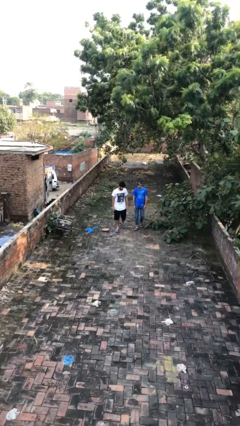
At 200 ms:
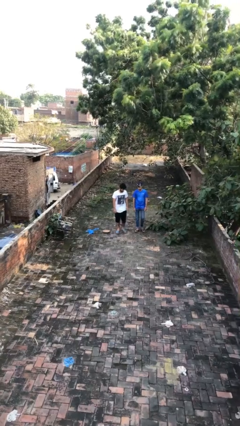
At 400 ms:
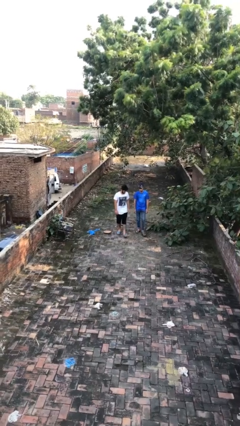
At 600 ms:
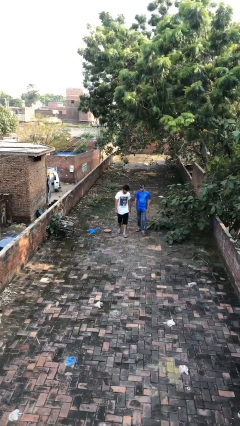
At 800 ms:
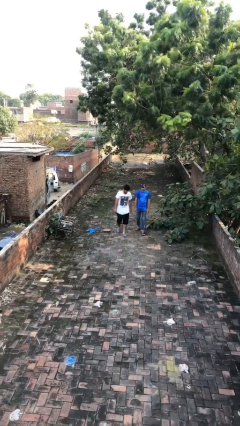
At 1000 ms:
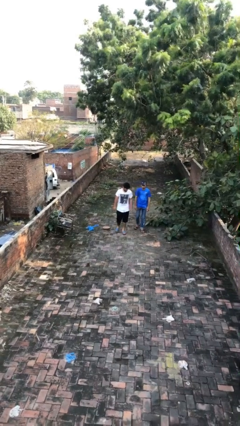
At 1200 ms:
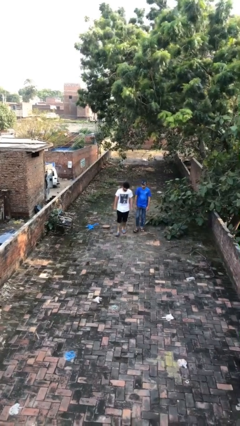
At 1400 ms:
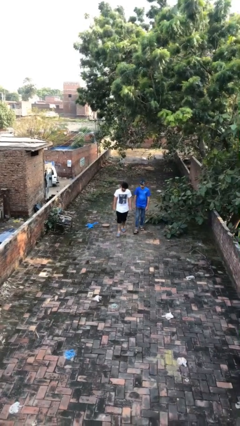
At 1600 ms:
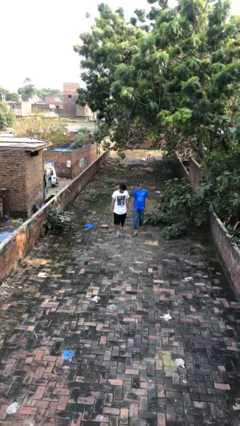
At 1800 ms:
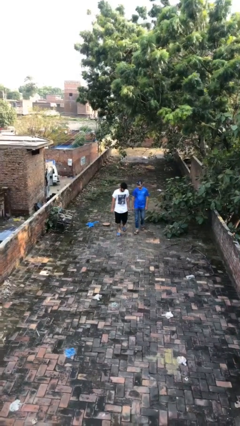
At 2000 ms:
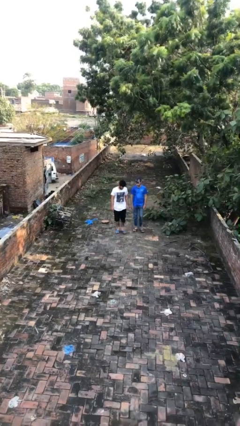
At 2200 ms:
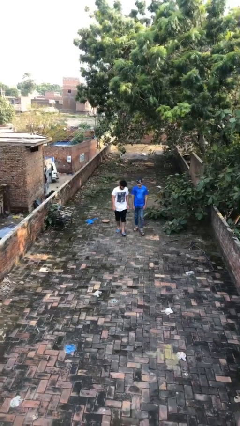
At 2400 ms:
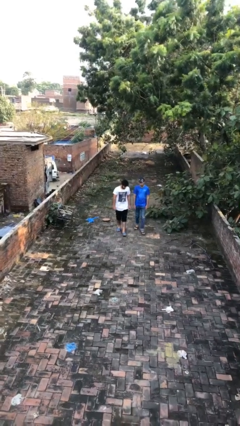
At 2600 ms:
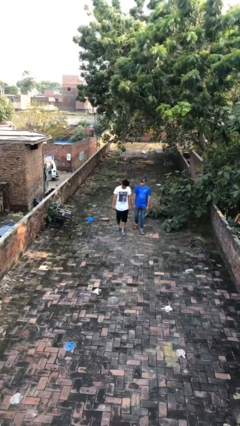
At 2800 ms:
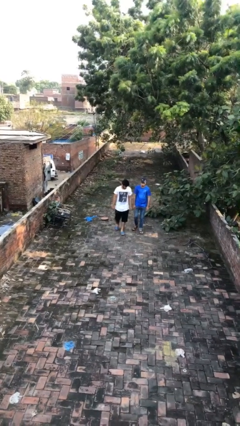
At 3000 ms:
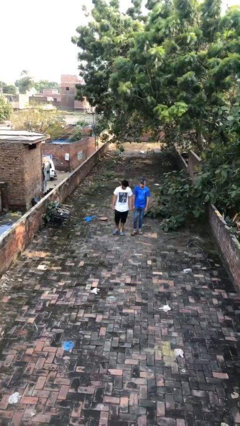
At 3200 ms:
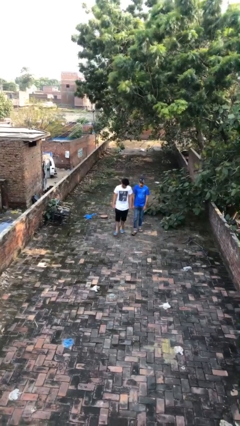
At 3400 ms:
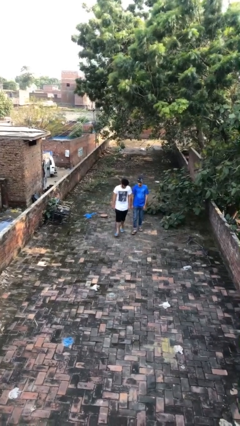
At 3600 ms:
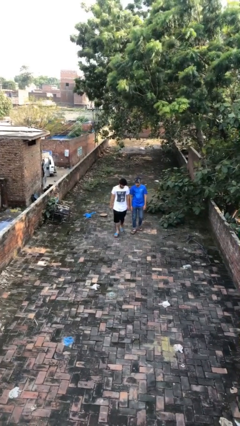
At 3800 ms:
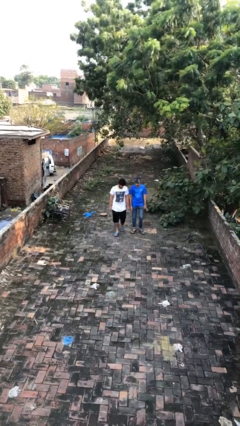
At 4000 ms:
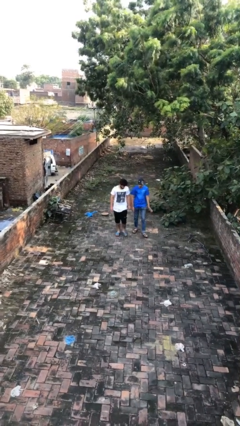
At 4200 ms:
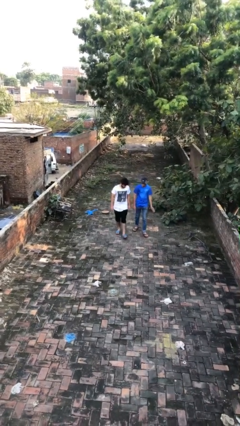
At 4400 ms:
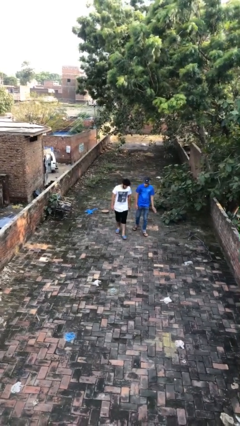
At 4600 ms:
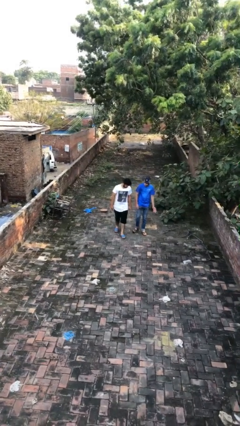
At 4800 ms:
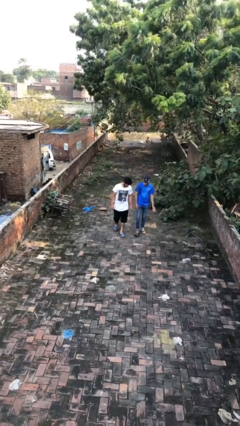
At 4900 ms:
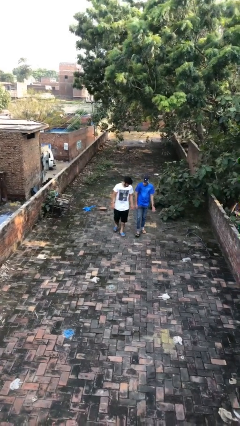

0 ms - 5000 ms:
person talks to person

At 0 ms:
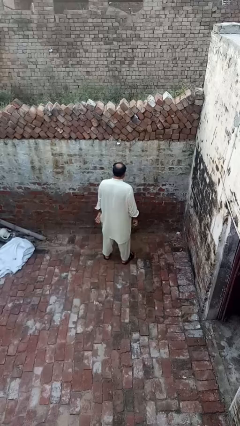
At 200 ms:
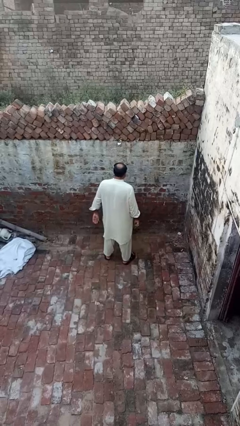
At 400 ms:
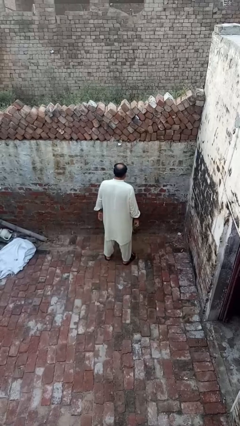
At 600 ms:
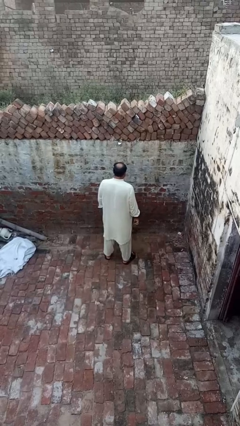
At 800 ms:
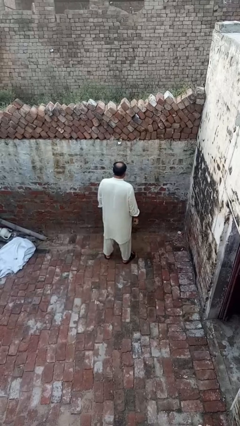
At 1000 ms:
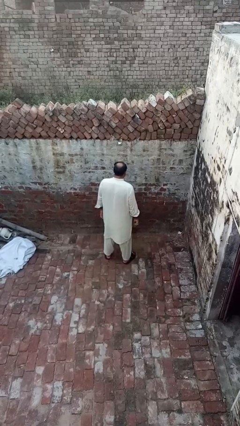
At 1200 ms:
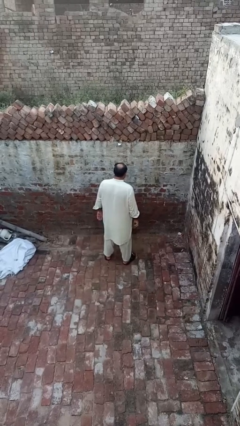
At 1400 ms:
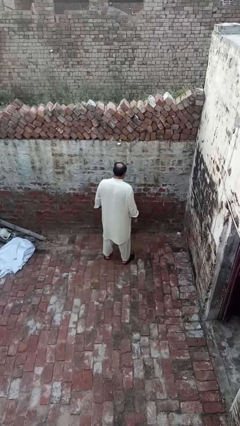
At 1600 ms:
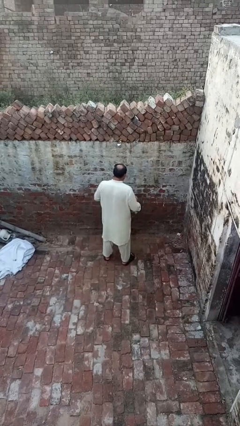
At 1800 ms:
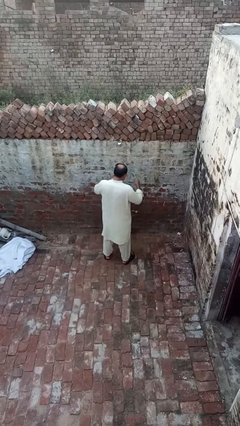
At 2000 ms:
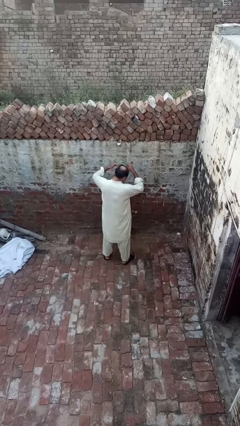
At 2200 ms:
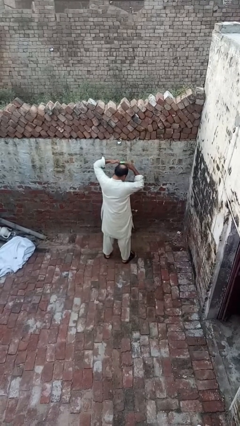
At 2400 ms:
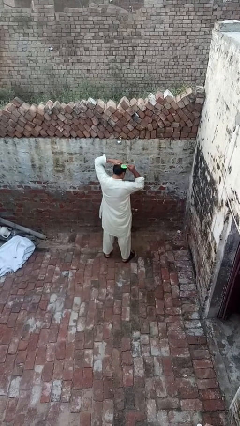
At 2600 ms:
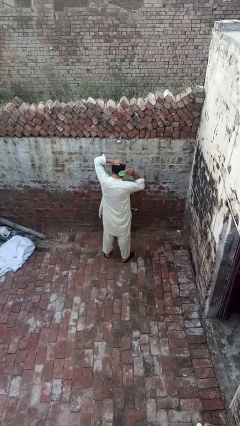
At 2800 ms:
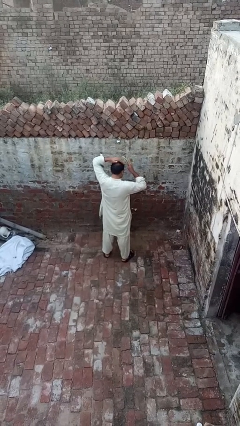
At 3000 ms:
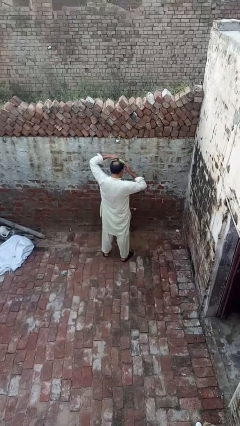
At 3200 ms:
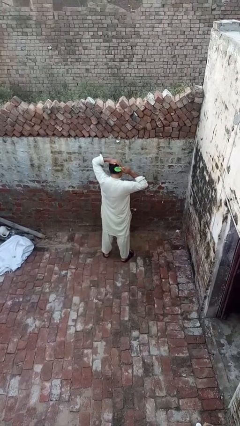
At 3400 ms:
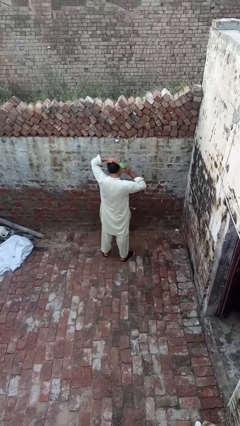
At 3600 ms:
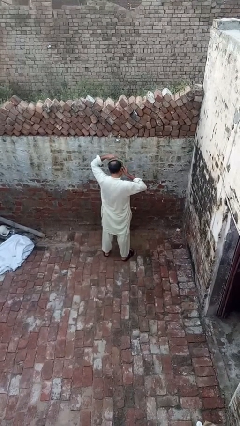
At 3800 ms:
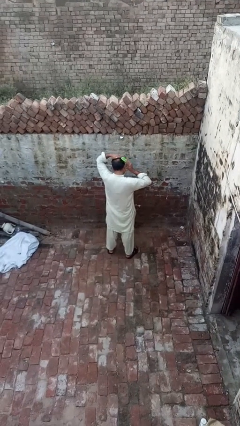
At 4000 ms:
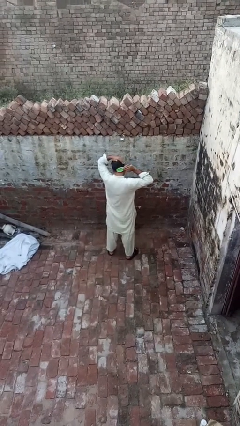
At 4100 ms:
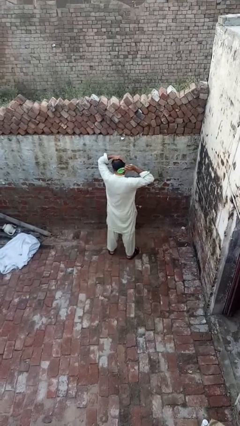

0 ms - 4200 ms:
person brushes hair

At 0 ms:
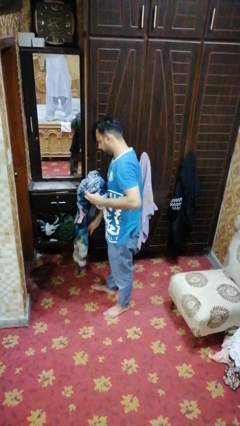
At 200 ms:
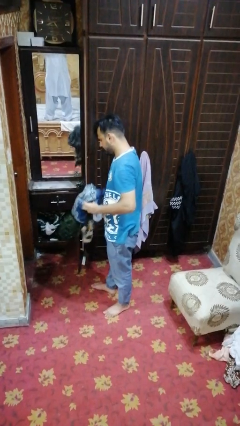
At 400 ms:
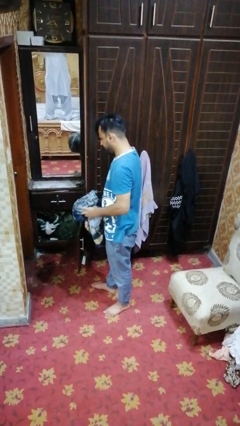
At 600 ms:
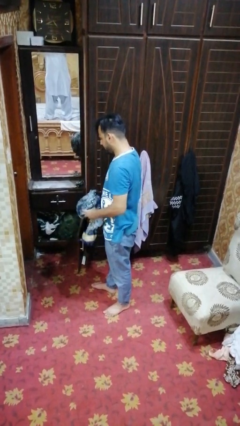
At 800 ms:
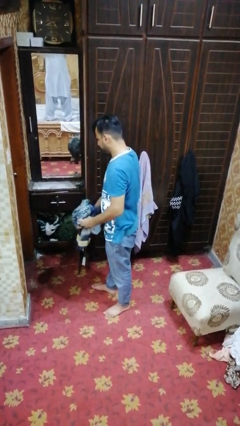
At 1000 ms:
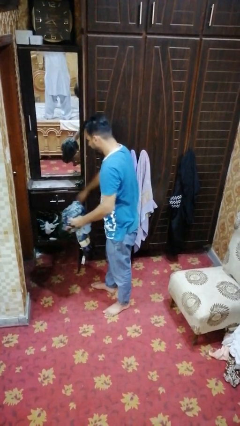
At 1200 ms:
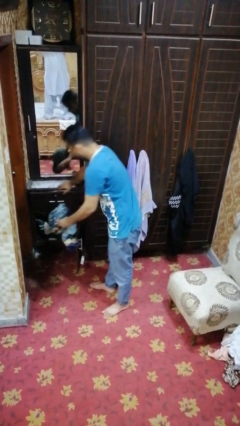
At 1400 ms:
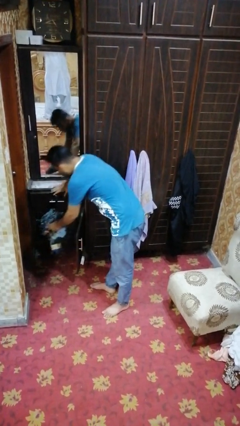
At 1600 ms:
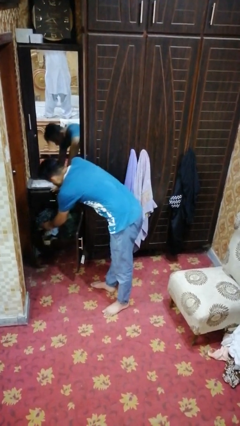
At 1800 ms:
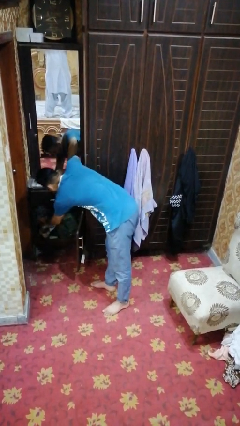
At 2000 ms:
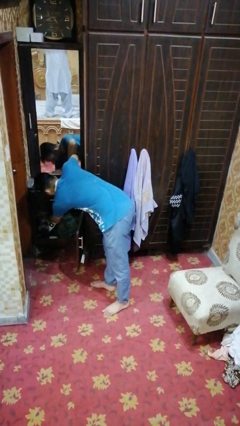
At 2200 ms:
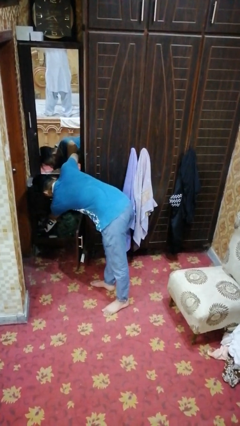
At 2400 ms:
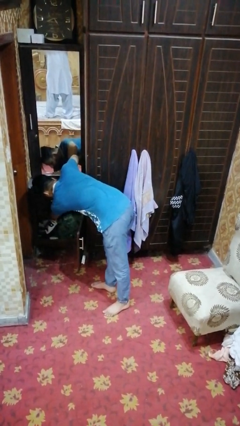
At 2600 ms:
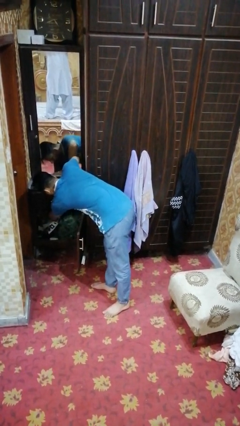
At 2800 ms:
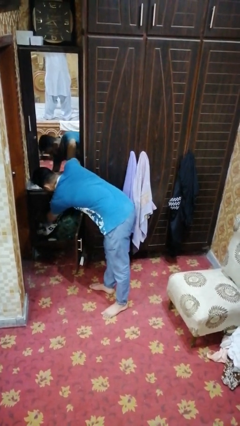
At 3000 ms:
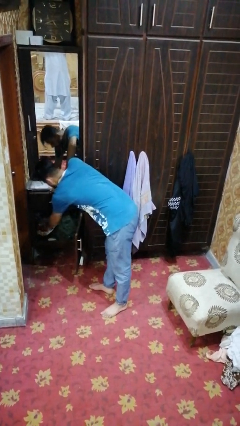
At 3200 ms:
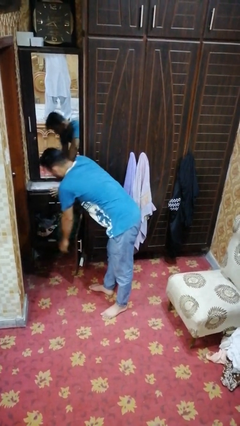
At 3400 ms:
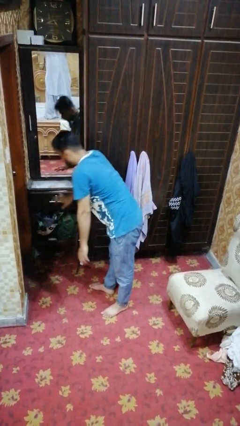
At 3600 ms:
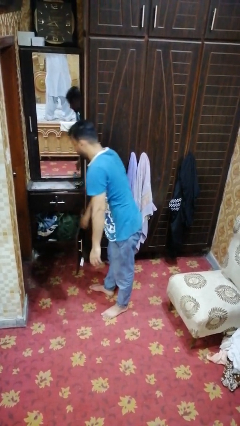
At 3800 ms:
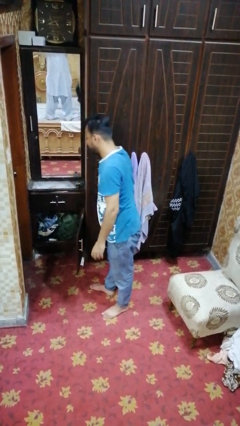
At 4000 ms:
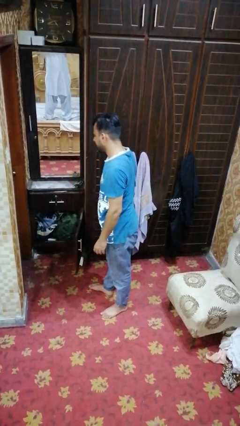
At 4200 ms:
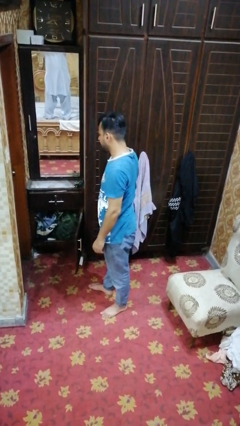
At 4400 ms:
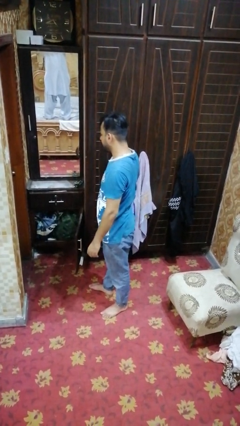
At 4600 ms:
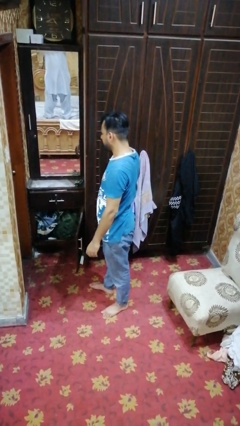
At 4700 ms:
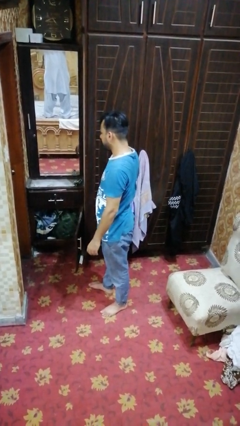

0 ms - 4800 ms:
person puts clothes into dresser

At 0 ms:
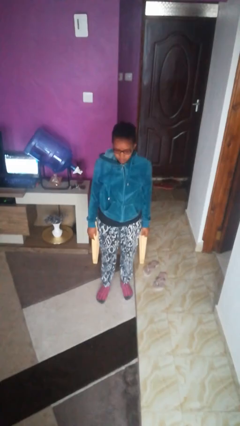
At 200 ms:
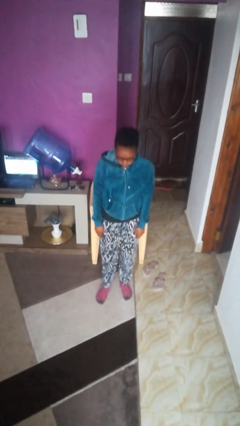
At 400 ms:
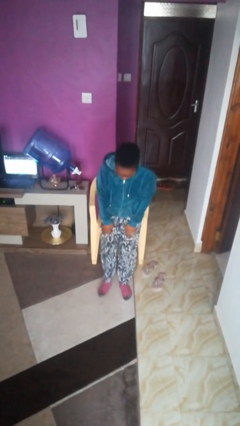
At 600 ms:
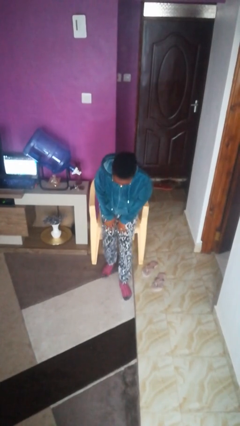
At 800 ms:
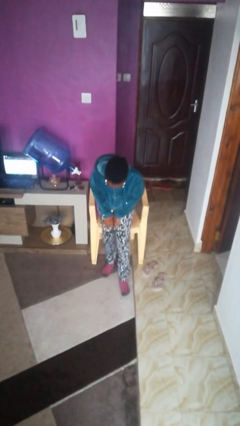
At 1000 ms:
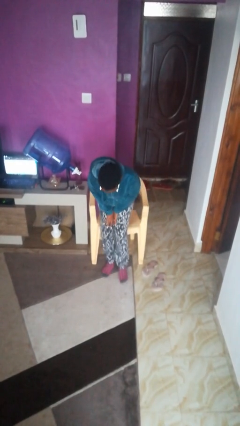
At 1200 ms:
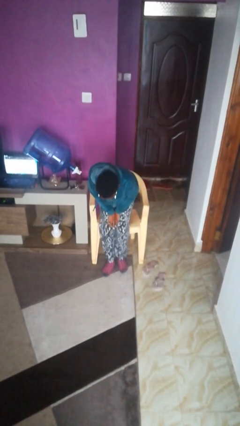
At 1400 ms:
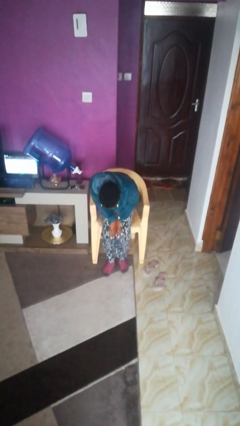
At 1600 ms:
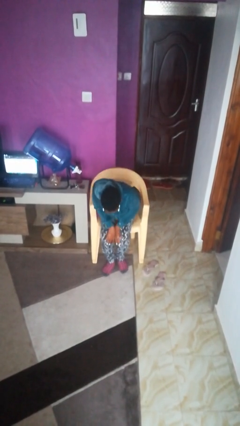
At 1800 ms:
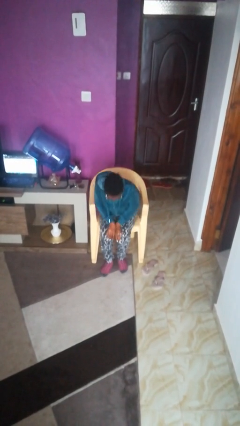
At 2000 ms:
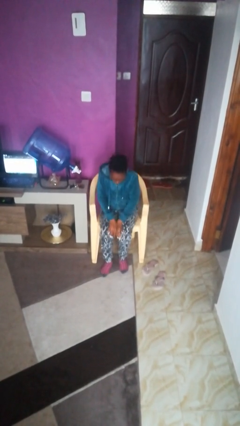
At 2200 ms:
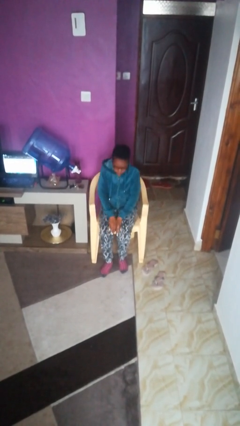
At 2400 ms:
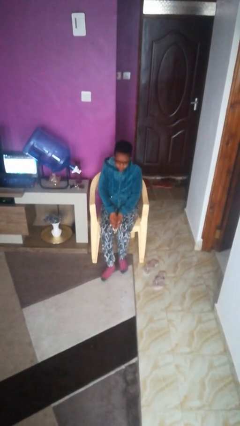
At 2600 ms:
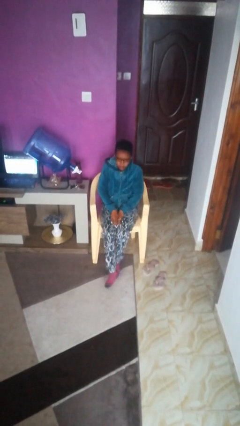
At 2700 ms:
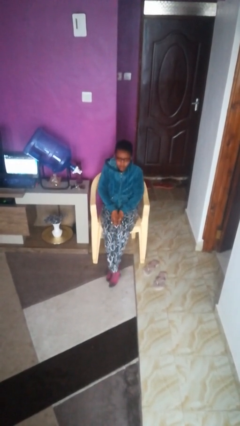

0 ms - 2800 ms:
person sits down

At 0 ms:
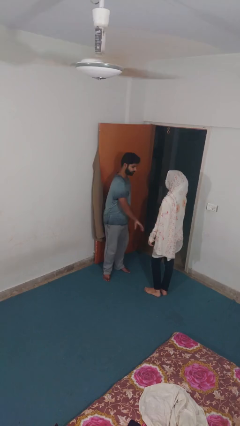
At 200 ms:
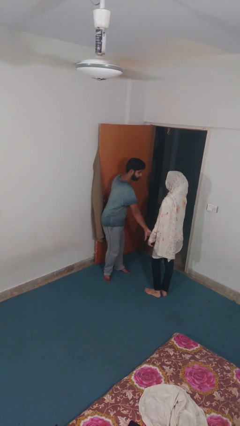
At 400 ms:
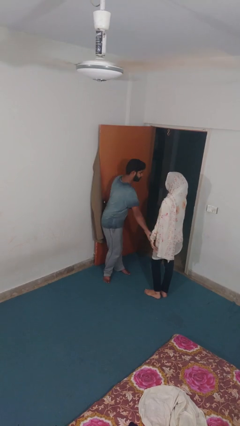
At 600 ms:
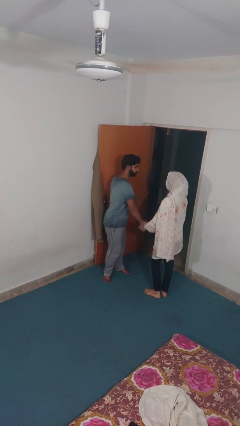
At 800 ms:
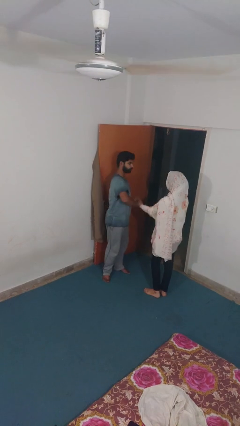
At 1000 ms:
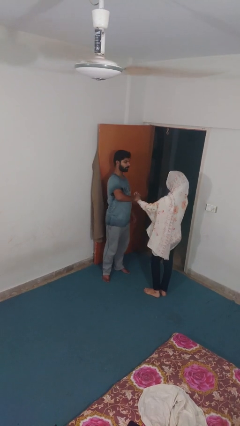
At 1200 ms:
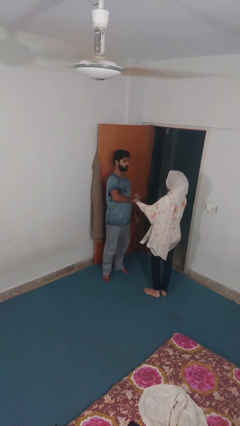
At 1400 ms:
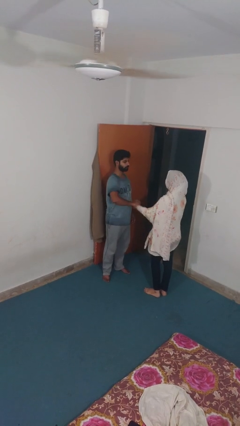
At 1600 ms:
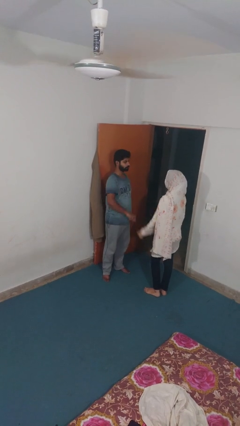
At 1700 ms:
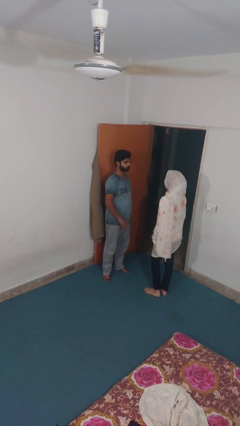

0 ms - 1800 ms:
person grabs person by forearm